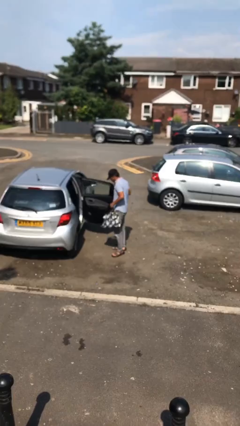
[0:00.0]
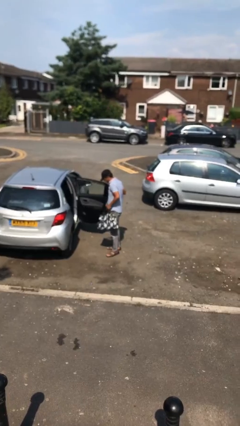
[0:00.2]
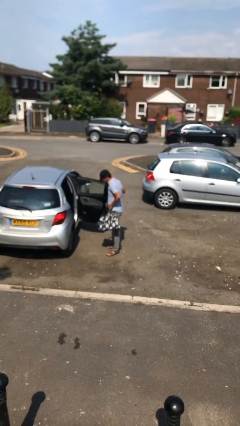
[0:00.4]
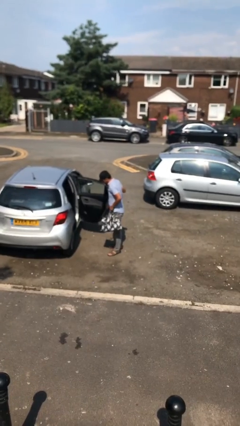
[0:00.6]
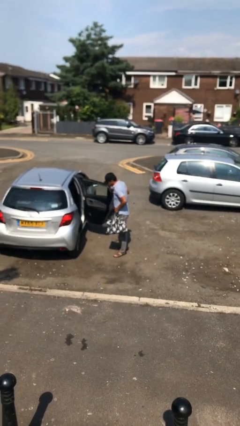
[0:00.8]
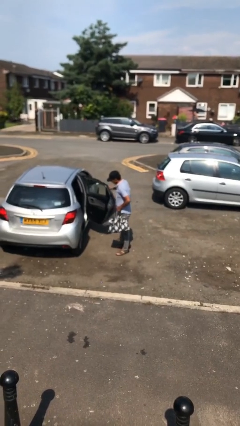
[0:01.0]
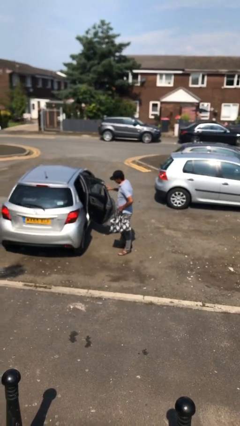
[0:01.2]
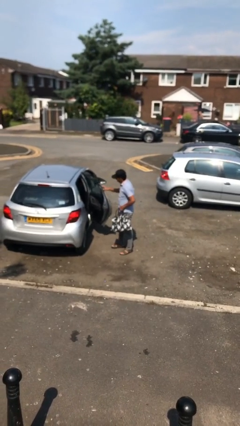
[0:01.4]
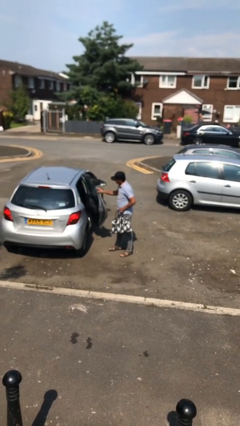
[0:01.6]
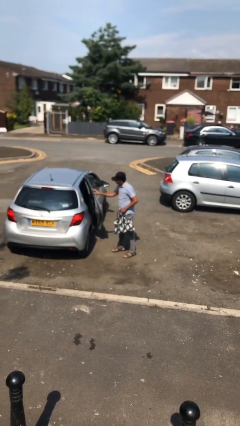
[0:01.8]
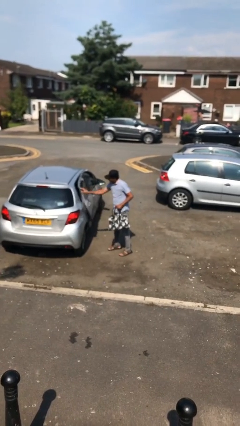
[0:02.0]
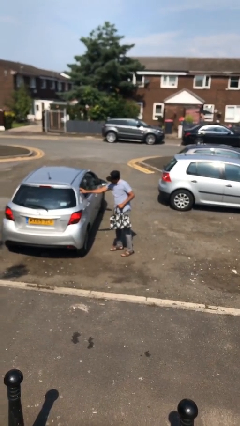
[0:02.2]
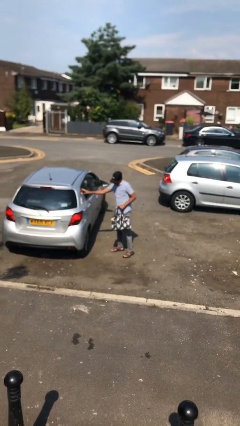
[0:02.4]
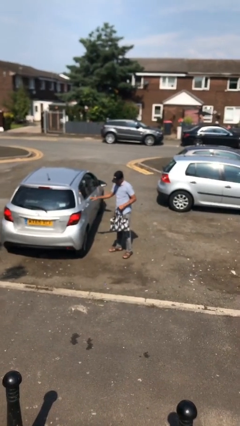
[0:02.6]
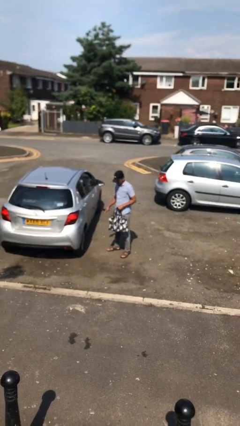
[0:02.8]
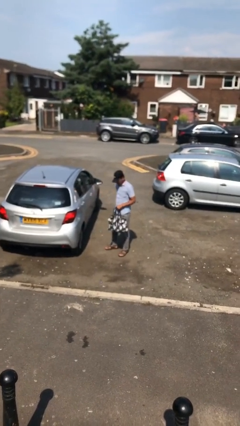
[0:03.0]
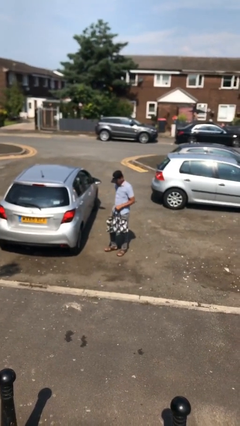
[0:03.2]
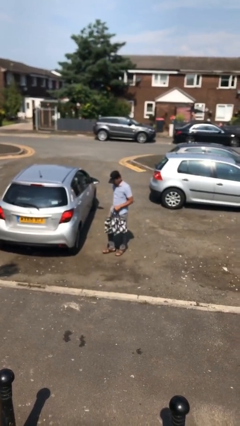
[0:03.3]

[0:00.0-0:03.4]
person closes car door

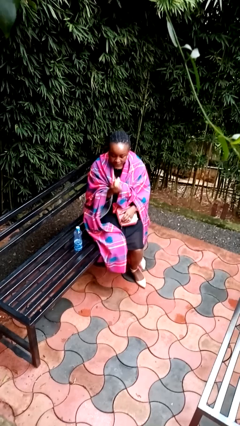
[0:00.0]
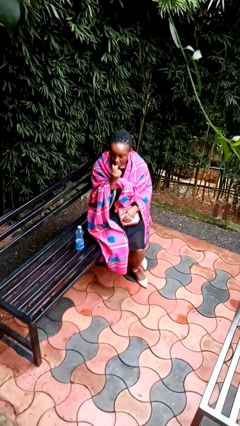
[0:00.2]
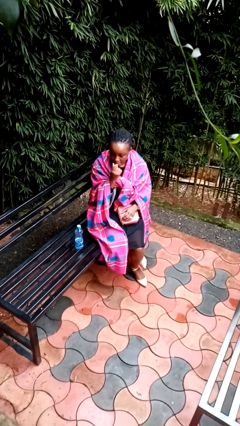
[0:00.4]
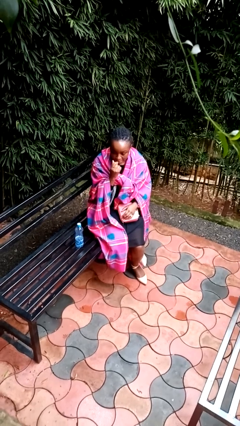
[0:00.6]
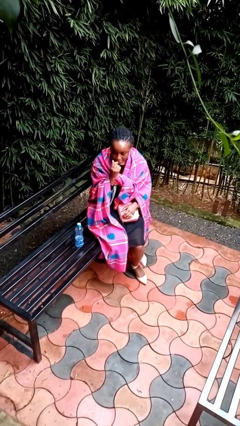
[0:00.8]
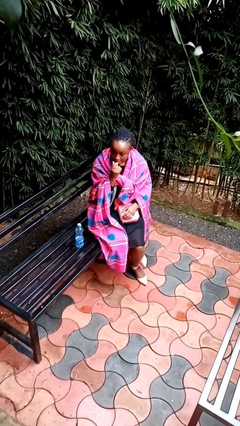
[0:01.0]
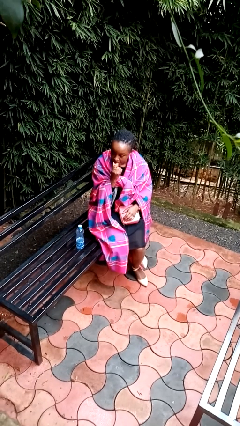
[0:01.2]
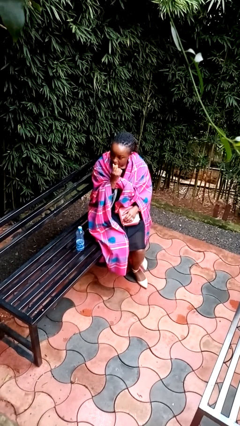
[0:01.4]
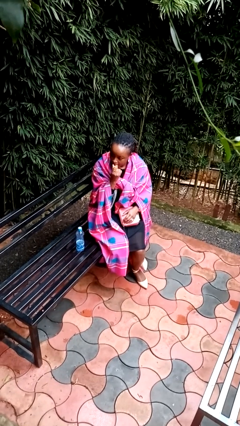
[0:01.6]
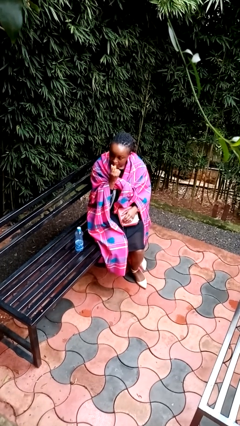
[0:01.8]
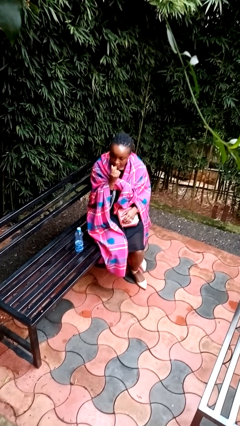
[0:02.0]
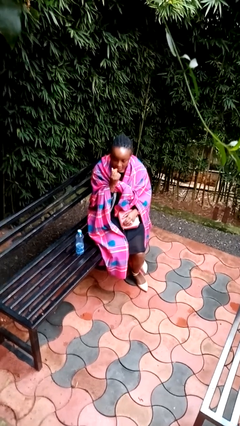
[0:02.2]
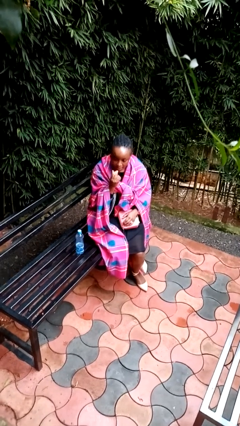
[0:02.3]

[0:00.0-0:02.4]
person applies lip makeup

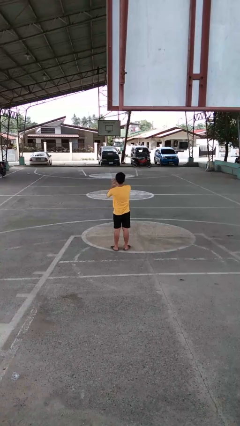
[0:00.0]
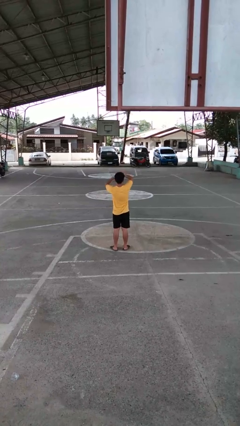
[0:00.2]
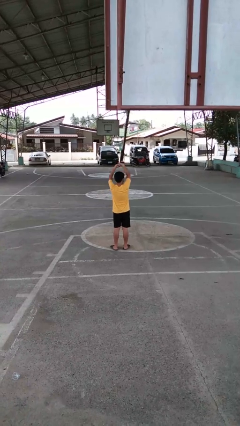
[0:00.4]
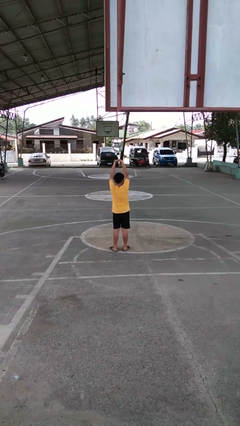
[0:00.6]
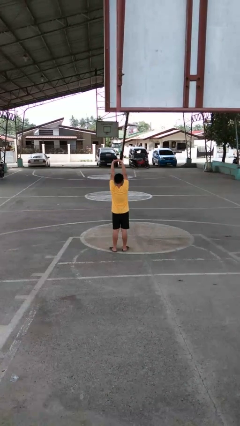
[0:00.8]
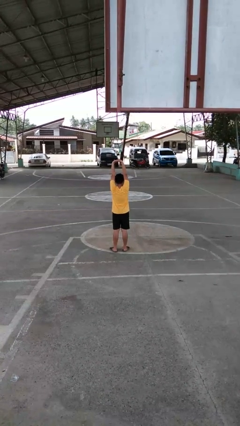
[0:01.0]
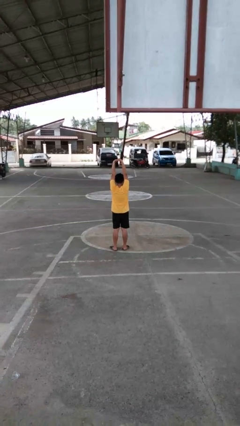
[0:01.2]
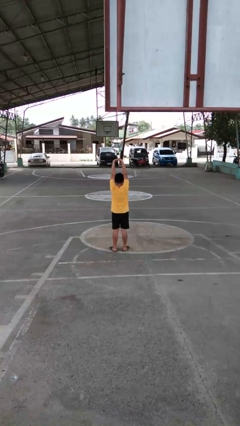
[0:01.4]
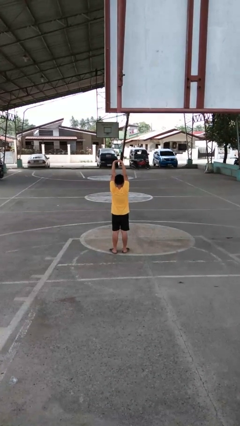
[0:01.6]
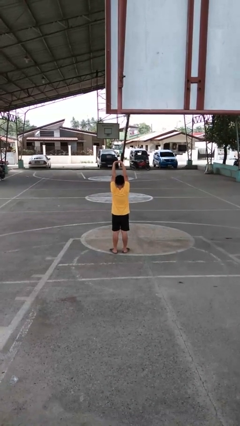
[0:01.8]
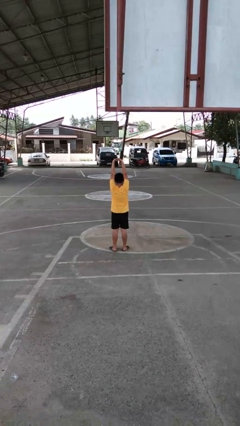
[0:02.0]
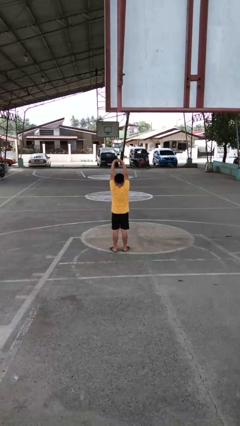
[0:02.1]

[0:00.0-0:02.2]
person stretches arms over head

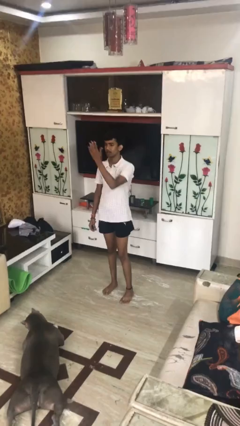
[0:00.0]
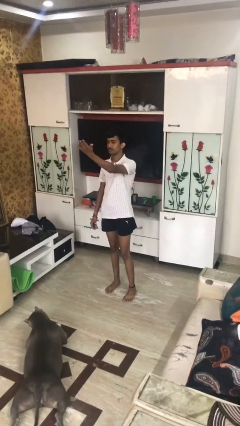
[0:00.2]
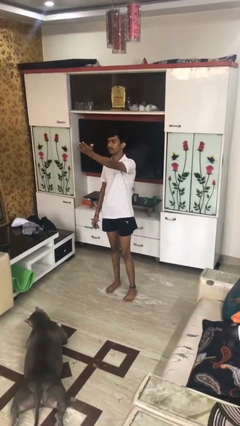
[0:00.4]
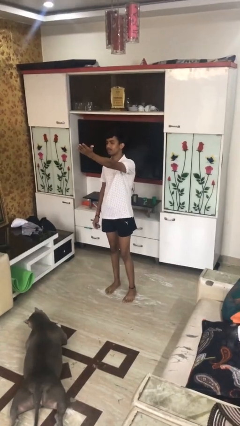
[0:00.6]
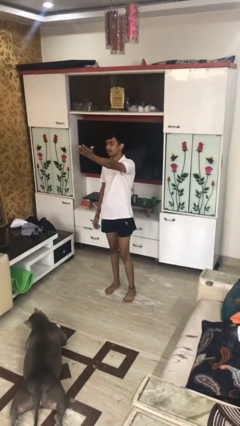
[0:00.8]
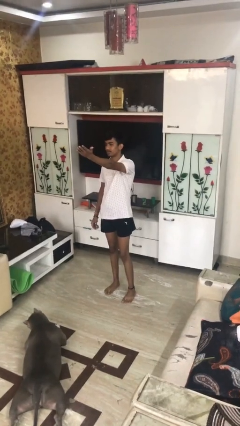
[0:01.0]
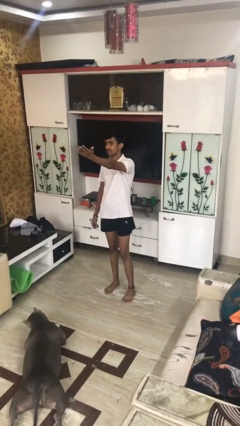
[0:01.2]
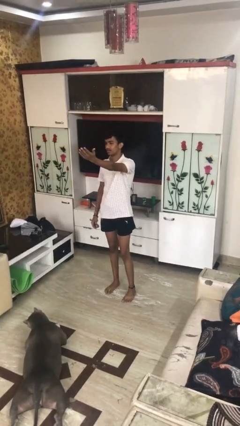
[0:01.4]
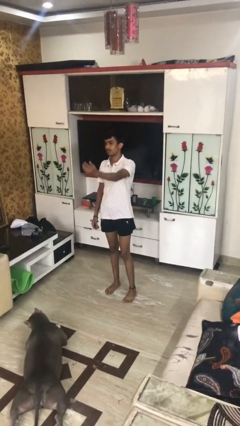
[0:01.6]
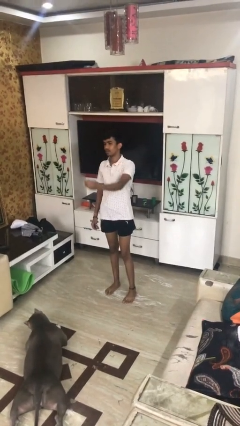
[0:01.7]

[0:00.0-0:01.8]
person gestures blow kiss

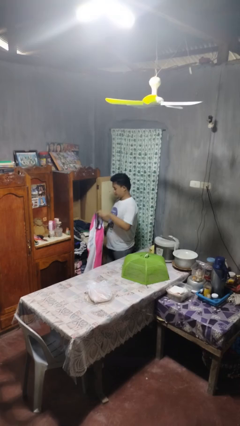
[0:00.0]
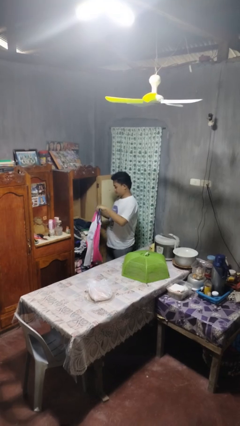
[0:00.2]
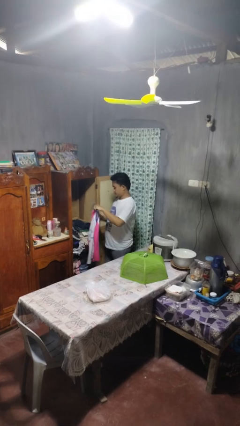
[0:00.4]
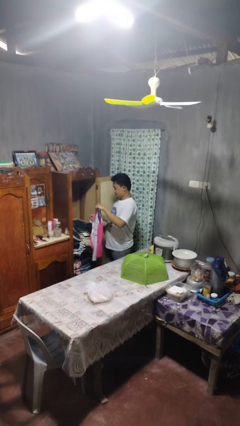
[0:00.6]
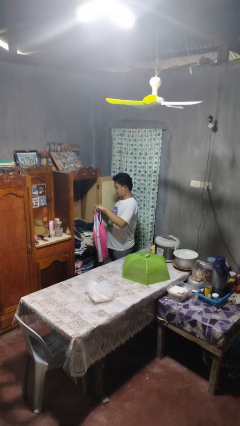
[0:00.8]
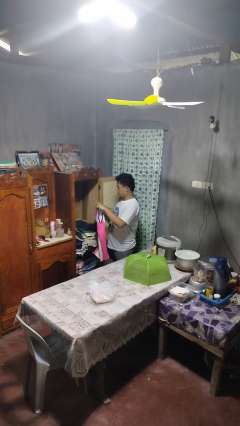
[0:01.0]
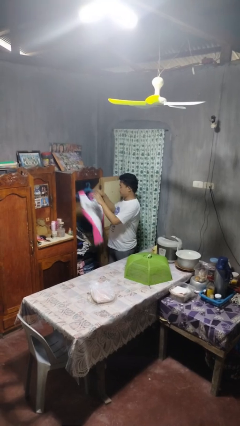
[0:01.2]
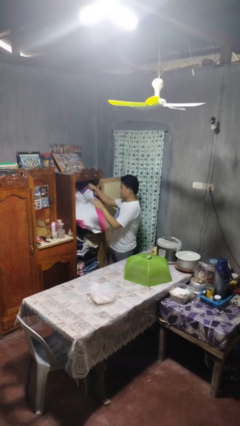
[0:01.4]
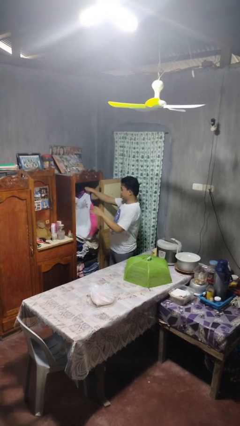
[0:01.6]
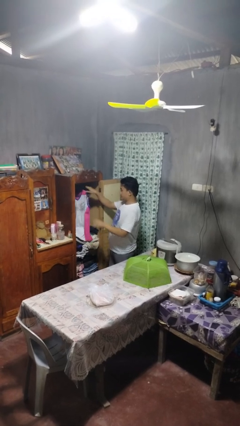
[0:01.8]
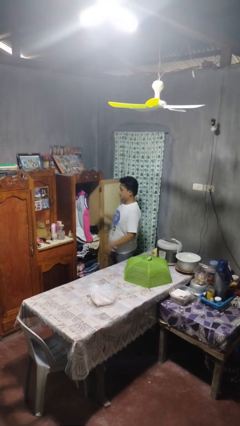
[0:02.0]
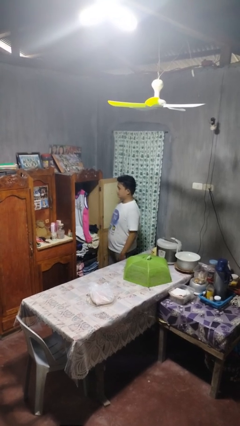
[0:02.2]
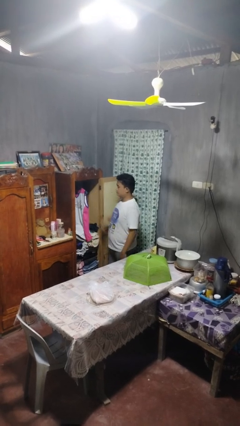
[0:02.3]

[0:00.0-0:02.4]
person puts clothes into closet

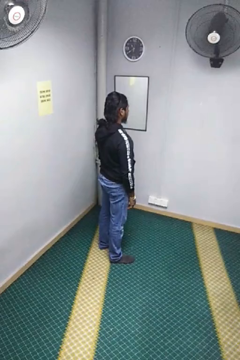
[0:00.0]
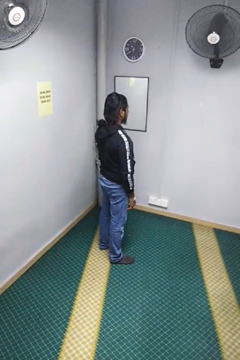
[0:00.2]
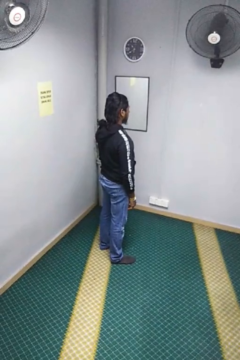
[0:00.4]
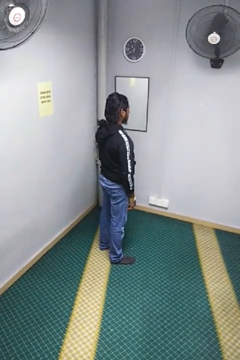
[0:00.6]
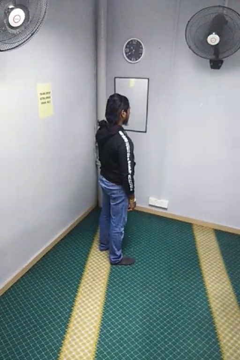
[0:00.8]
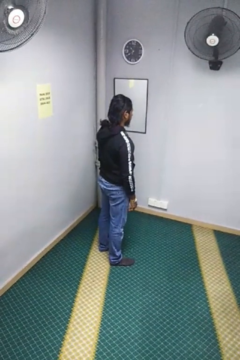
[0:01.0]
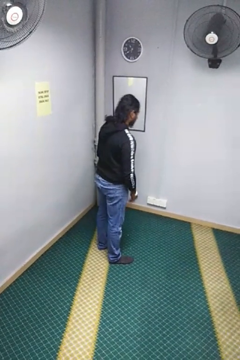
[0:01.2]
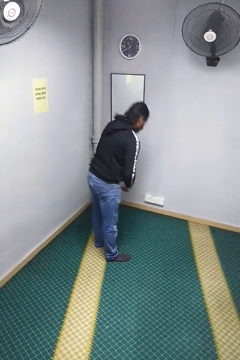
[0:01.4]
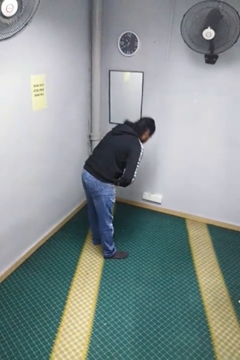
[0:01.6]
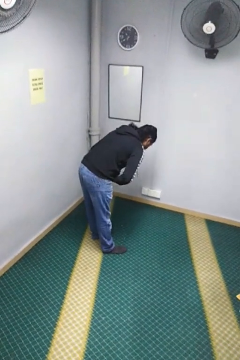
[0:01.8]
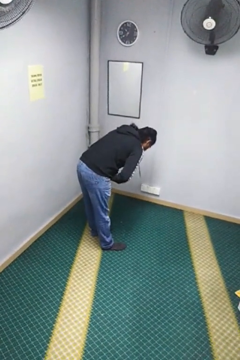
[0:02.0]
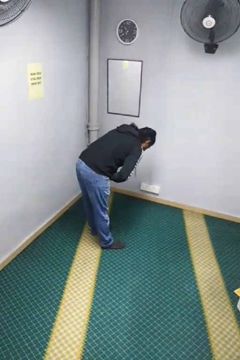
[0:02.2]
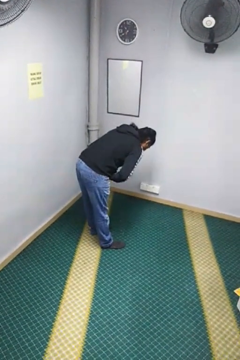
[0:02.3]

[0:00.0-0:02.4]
person bows

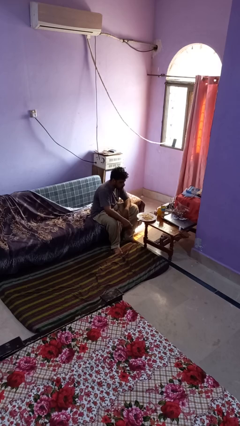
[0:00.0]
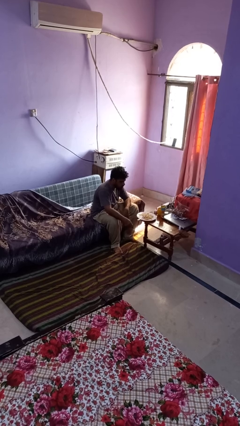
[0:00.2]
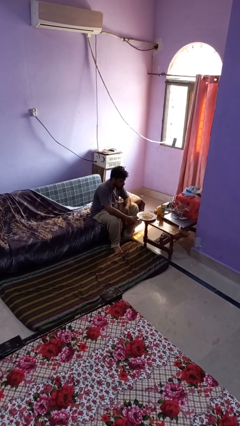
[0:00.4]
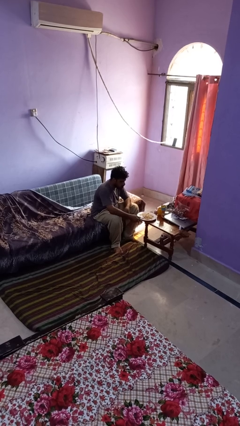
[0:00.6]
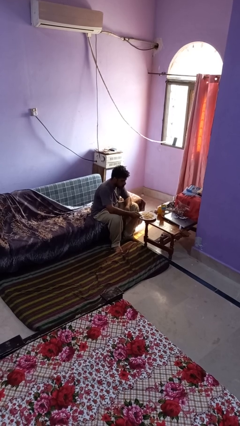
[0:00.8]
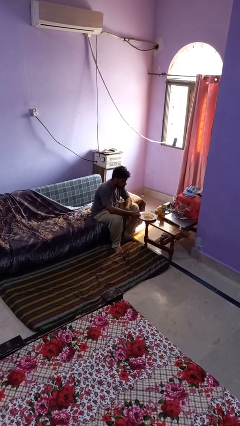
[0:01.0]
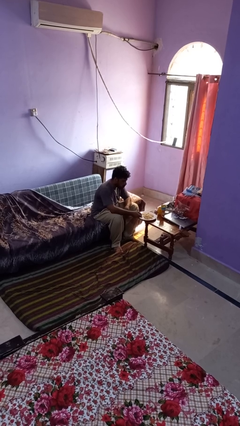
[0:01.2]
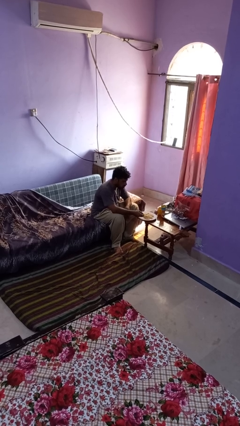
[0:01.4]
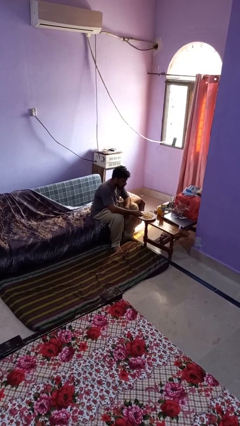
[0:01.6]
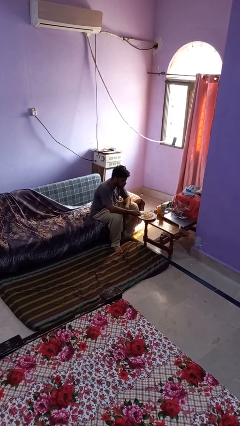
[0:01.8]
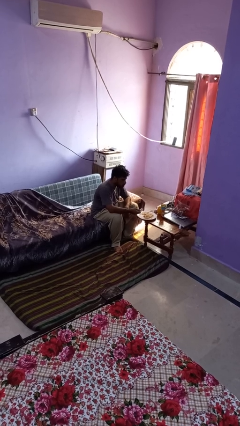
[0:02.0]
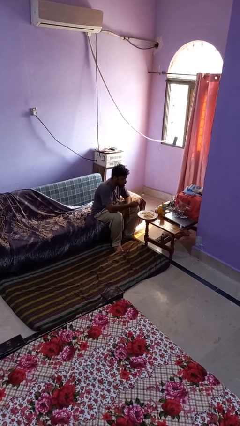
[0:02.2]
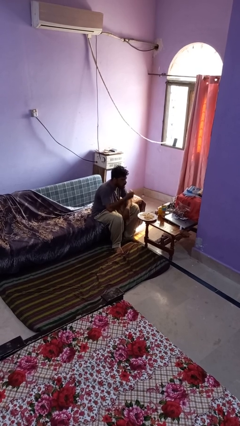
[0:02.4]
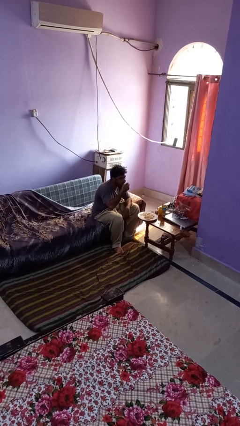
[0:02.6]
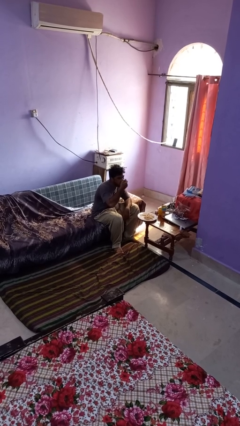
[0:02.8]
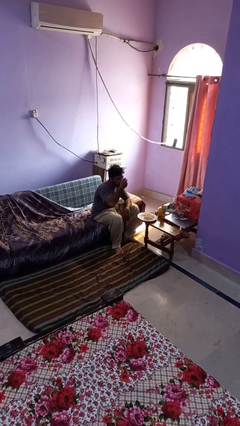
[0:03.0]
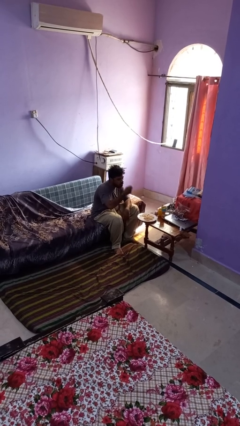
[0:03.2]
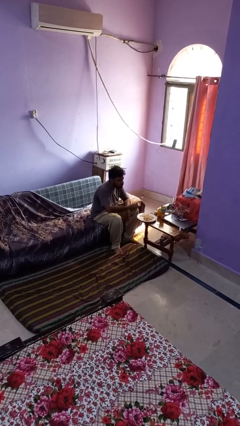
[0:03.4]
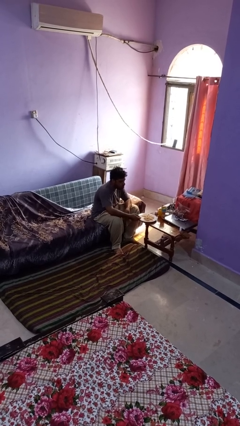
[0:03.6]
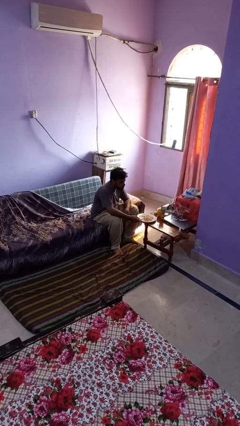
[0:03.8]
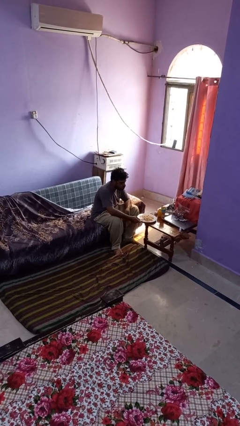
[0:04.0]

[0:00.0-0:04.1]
person eats with utensil
